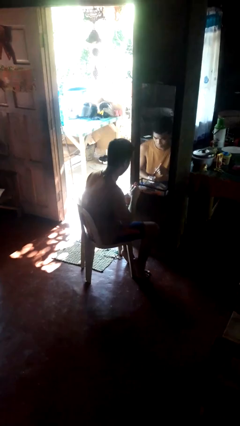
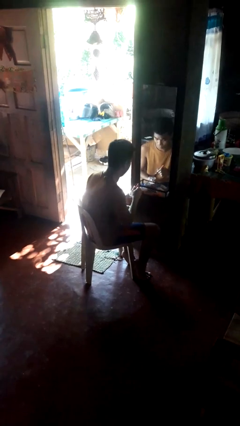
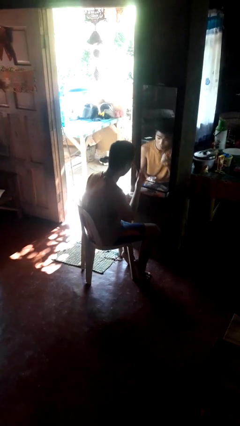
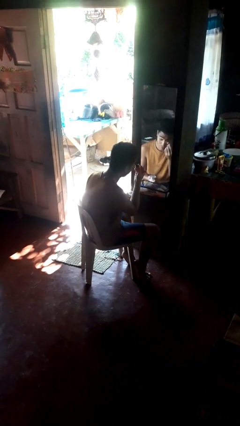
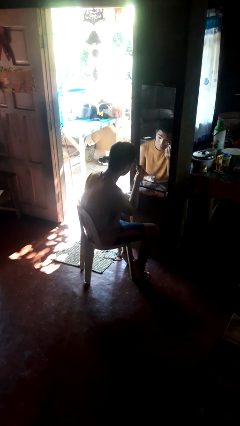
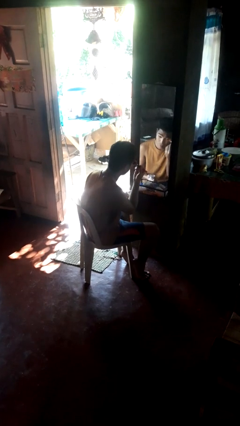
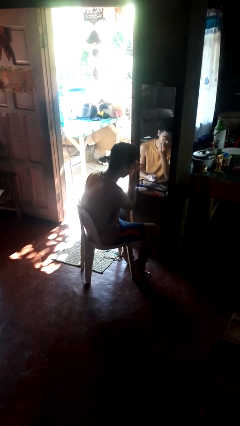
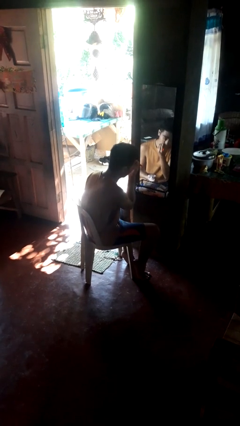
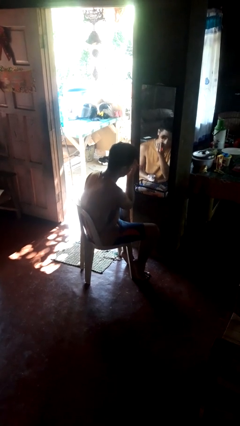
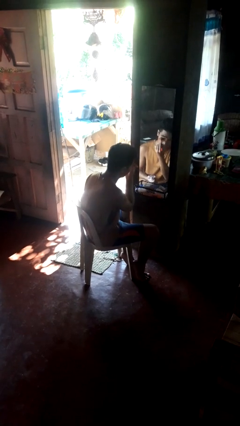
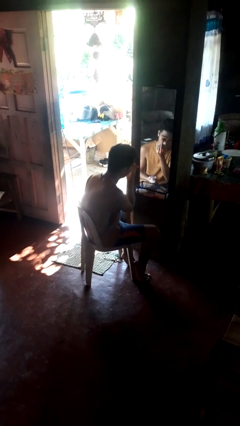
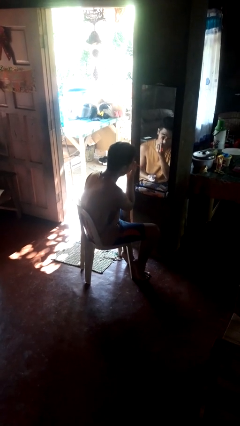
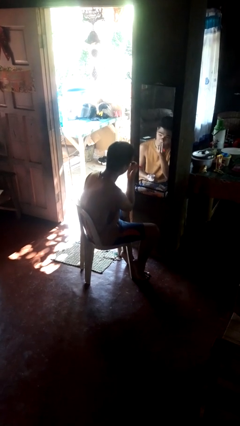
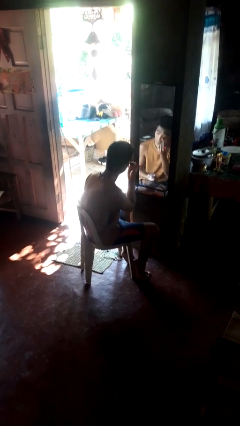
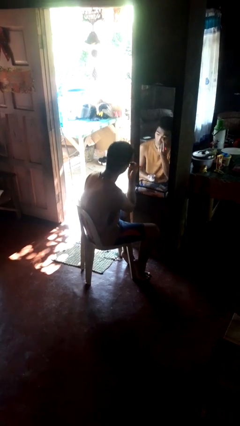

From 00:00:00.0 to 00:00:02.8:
person applies eye makeup

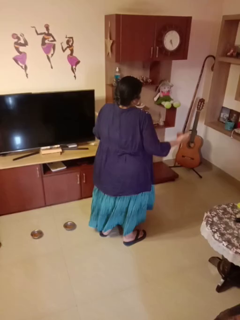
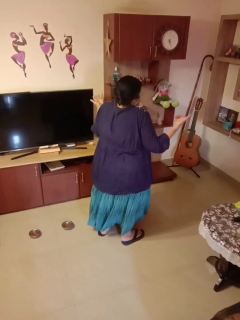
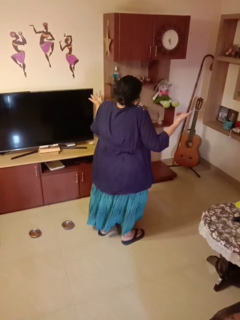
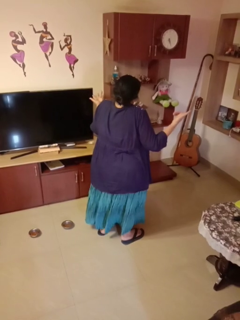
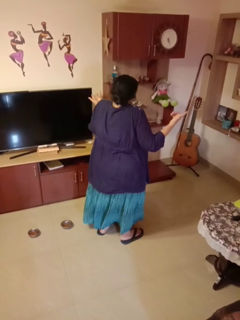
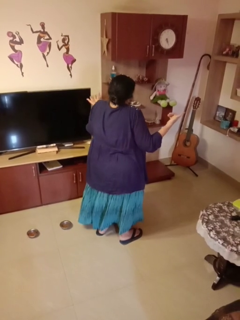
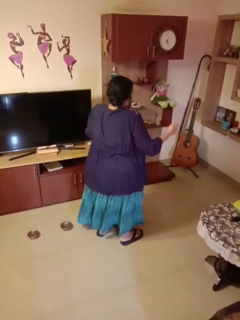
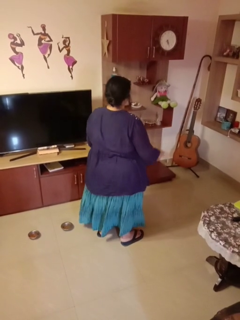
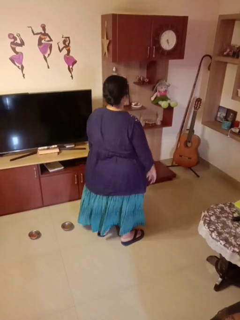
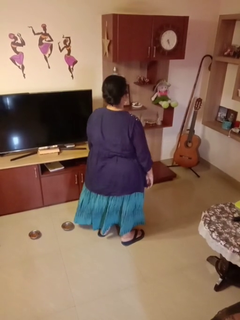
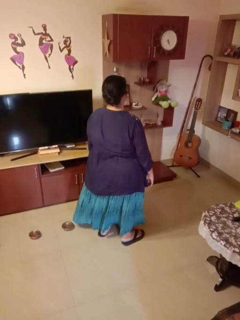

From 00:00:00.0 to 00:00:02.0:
person shrugs

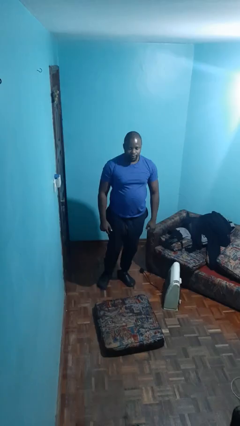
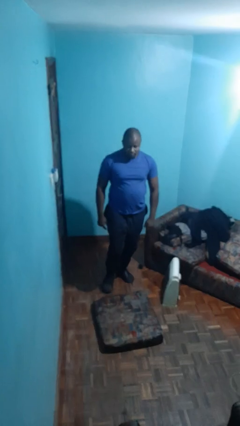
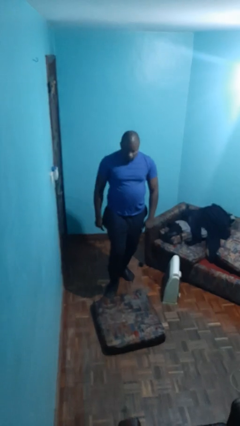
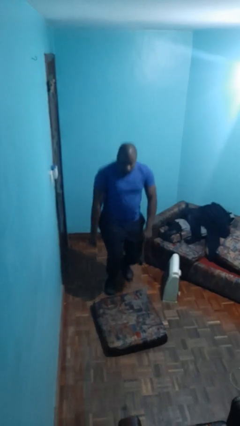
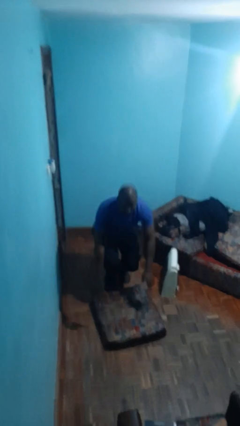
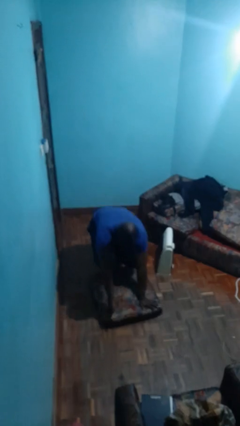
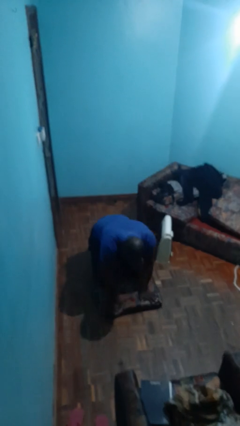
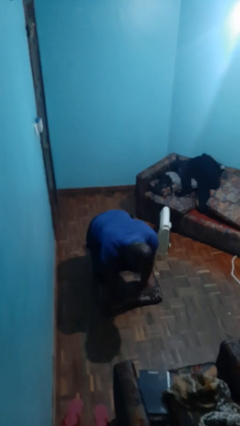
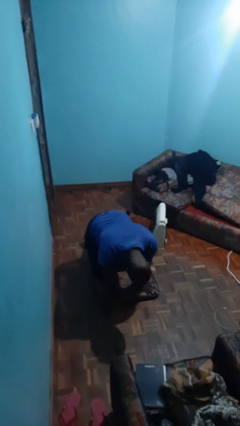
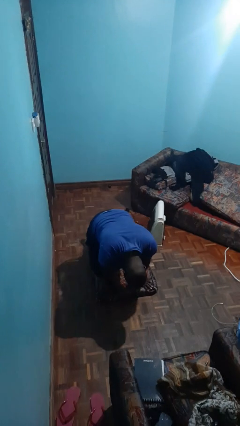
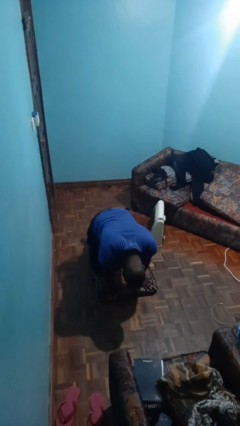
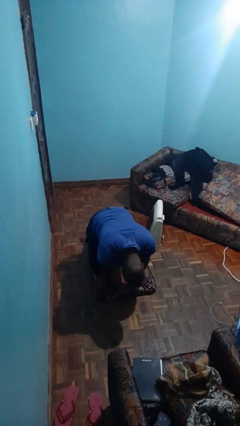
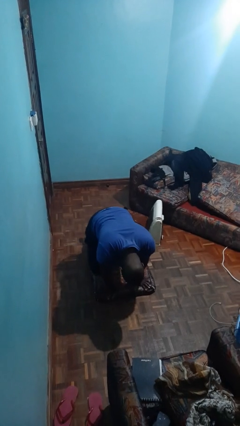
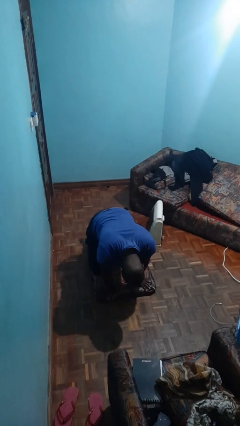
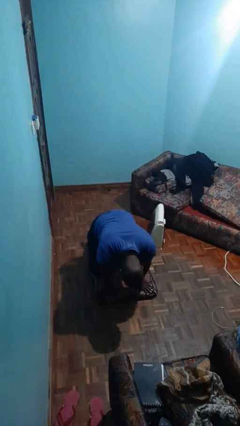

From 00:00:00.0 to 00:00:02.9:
person trips on object on floor

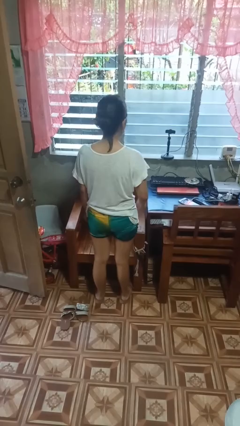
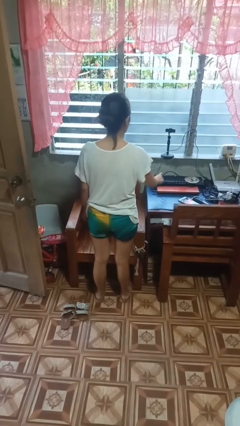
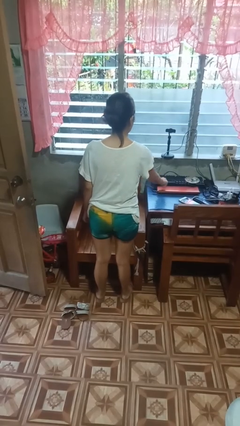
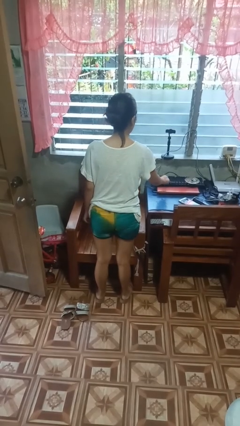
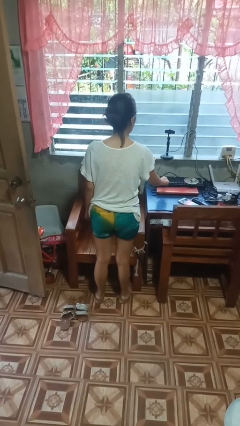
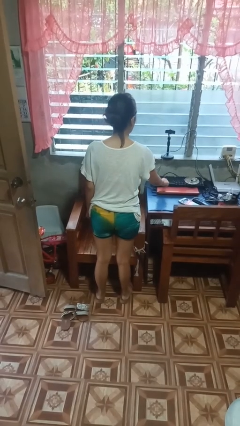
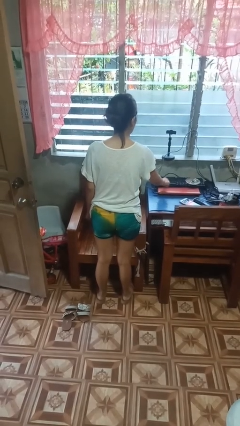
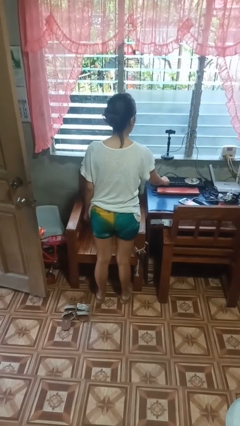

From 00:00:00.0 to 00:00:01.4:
person taps object with finger

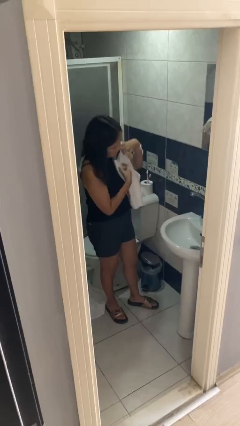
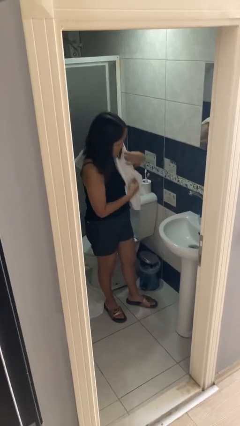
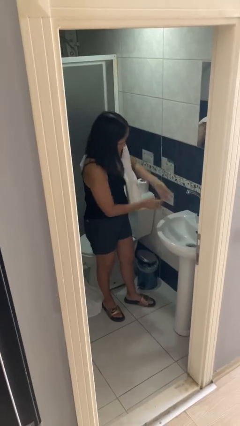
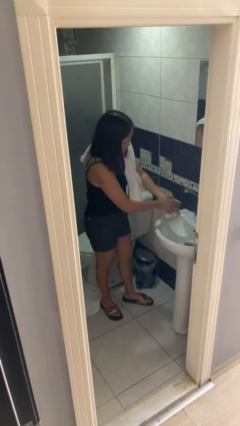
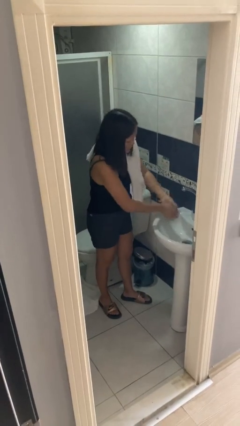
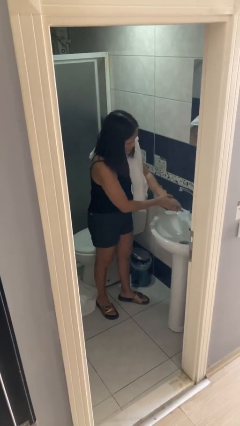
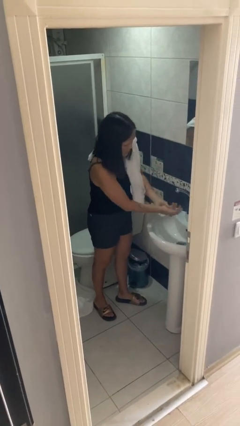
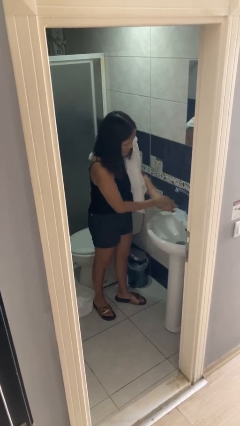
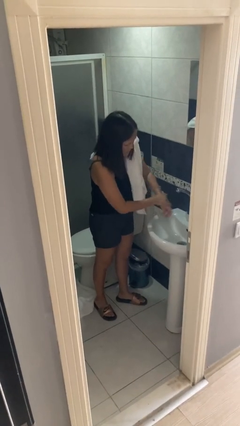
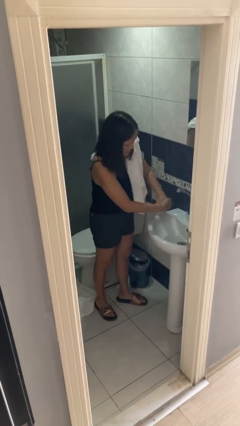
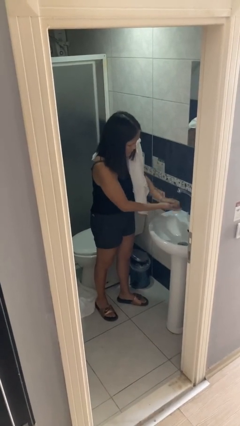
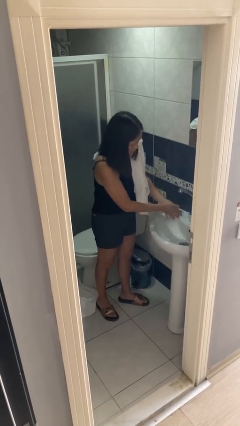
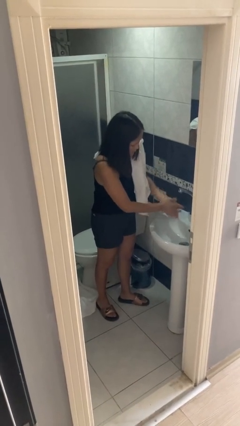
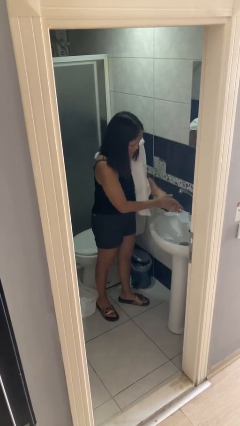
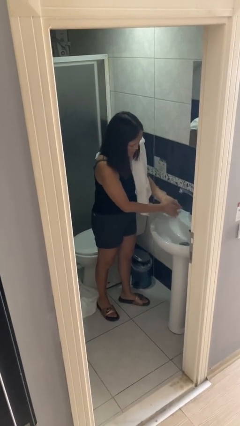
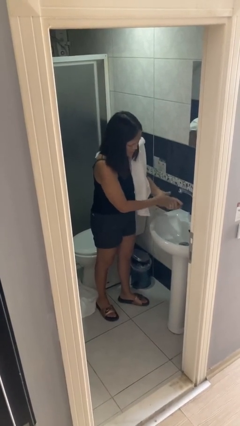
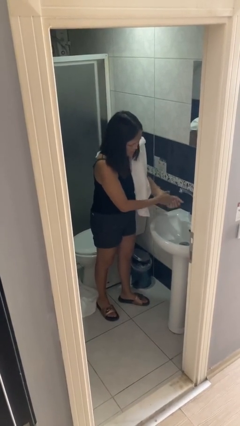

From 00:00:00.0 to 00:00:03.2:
person washes hands

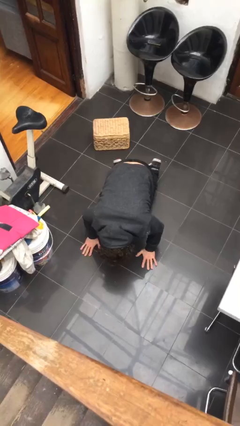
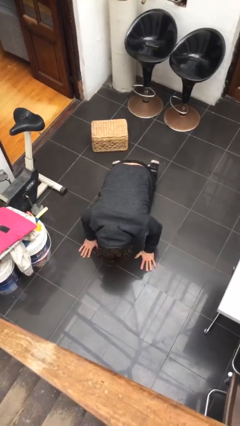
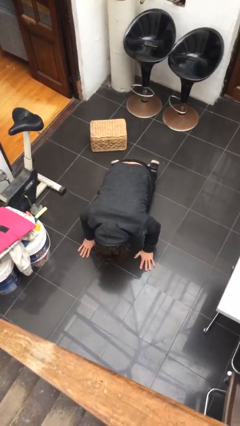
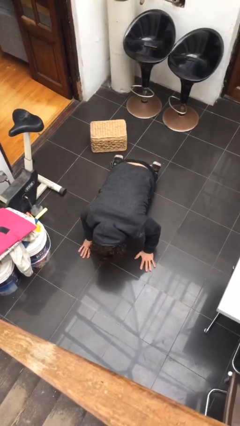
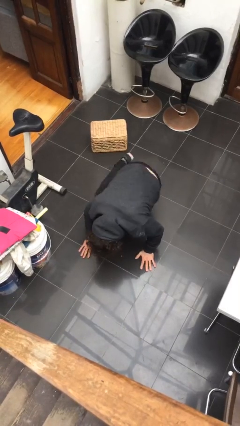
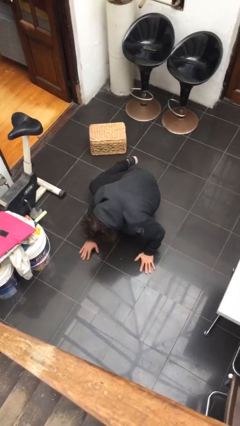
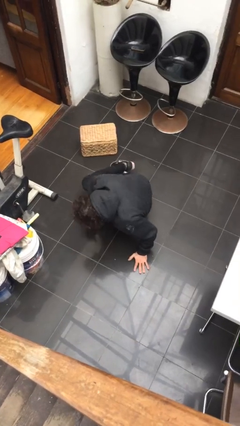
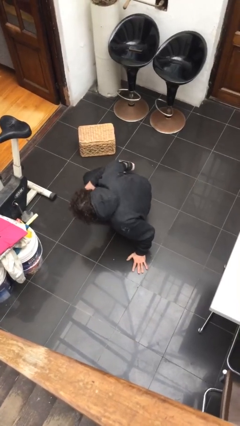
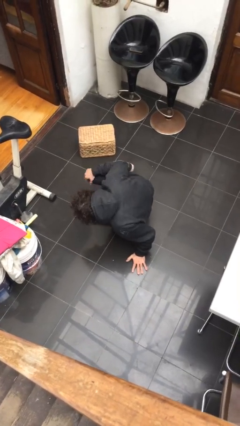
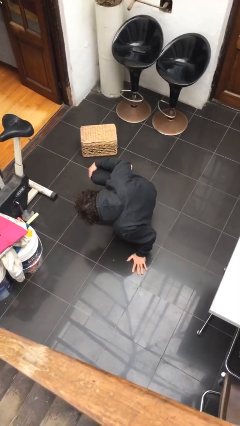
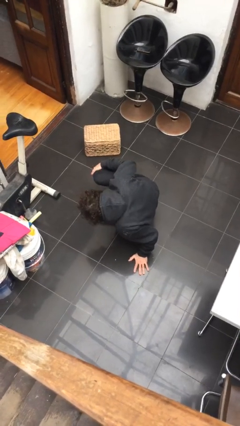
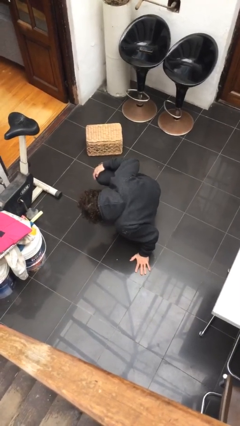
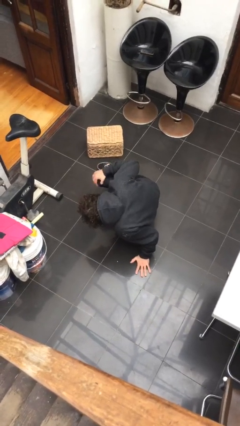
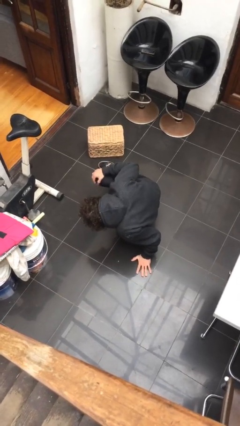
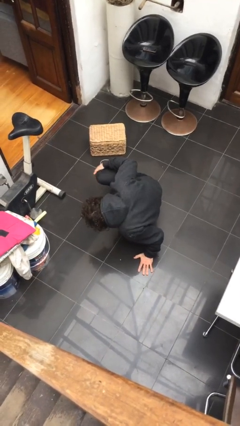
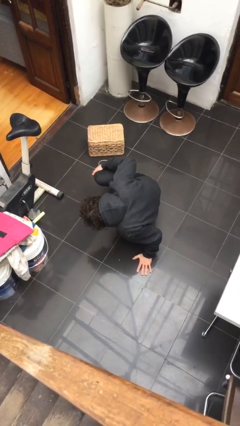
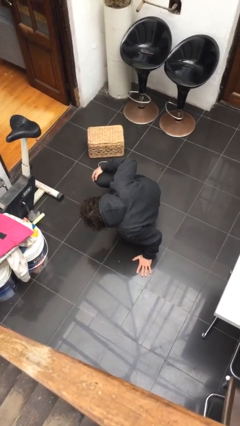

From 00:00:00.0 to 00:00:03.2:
person lies down on floor

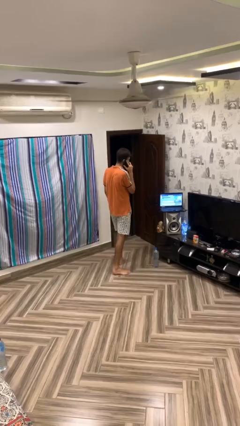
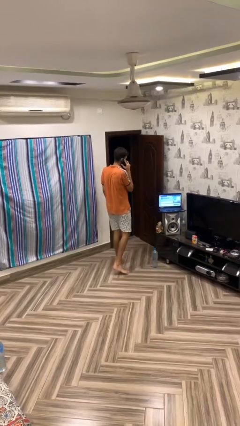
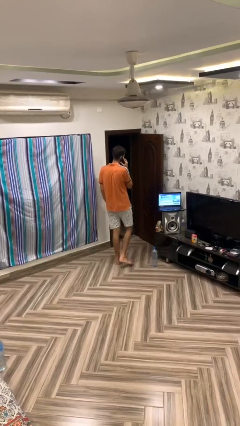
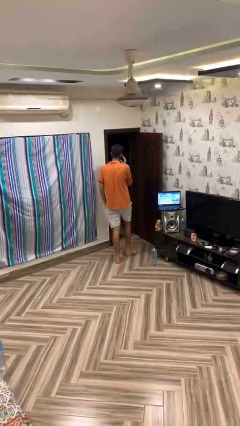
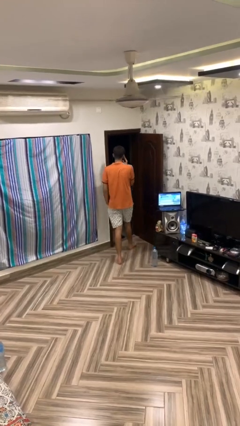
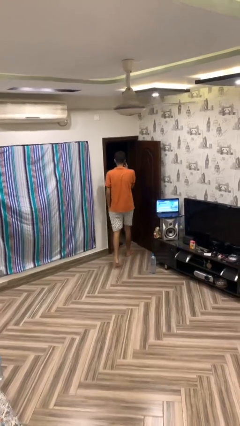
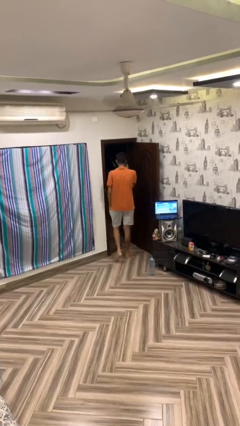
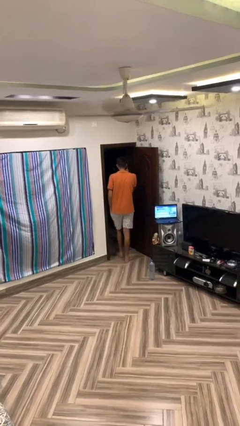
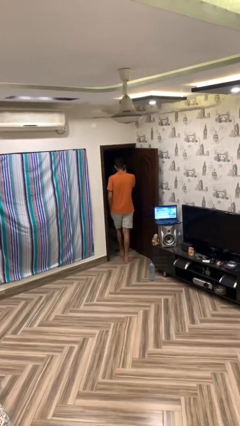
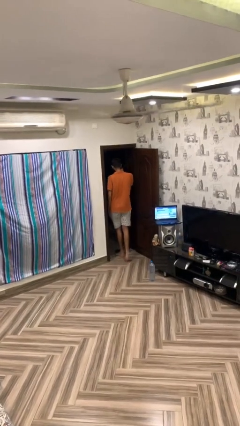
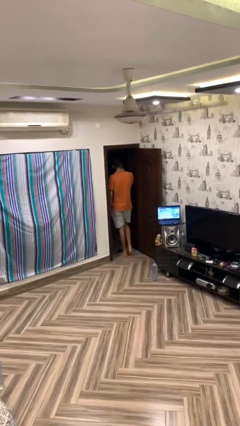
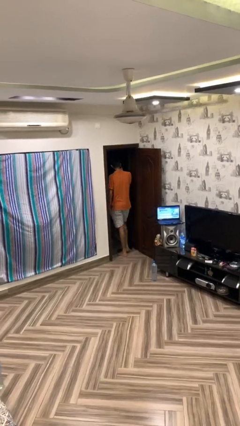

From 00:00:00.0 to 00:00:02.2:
person exits scene through structure
